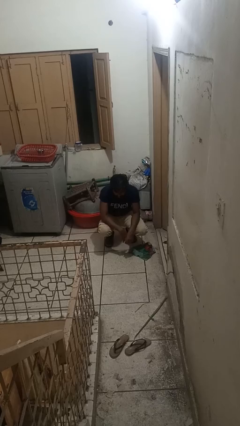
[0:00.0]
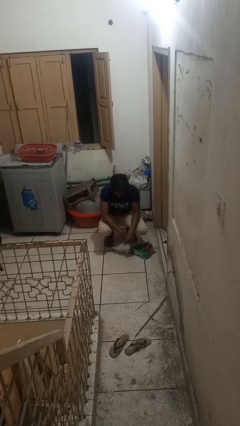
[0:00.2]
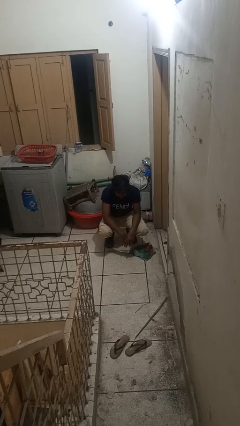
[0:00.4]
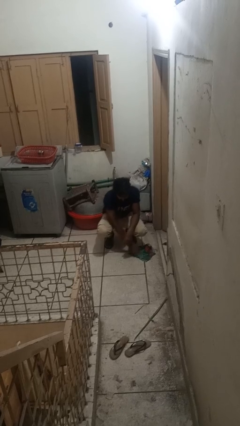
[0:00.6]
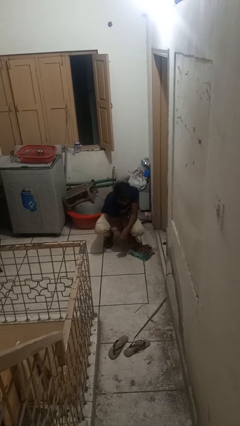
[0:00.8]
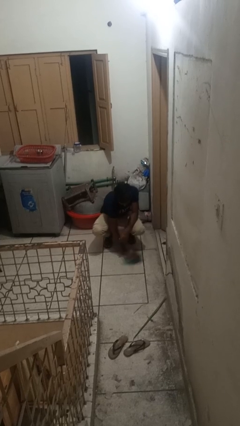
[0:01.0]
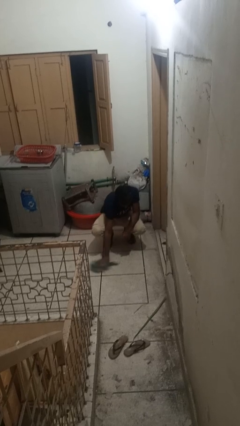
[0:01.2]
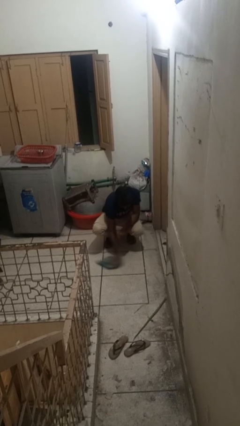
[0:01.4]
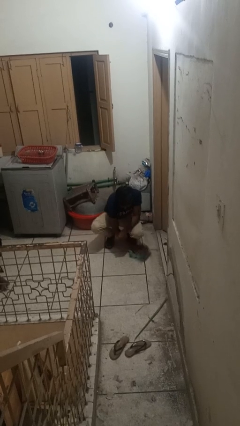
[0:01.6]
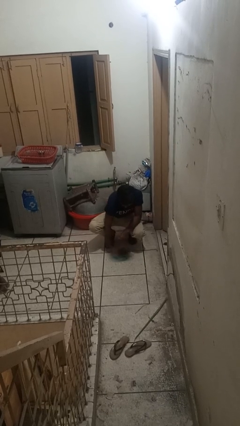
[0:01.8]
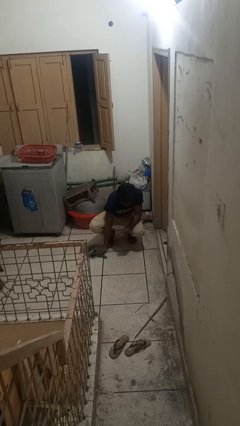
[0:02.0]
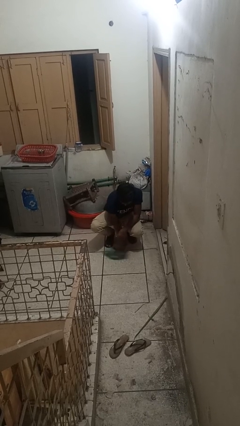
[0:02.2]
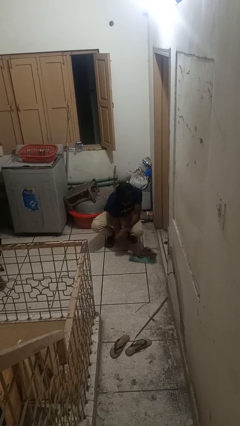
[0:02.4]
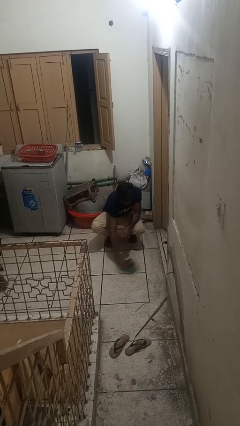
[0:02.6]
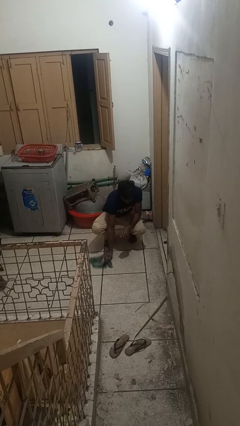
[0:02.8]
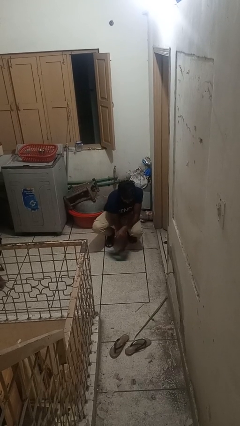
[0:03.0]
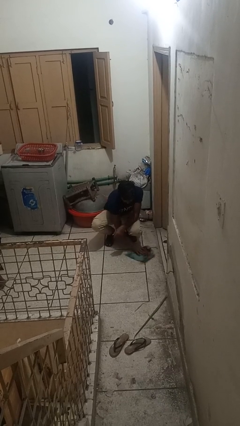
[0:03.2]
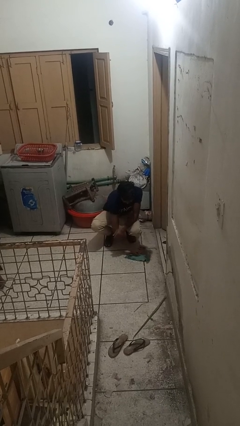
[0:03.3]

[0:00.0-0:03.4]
person mops

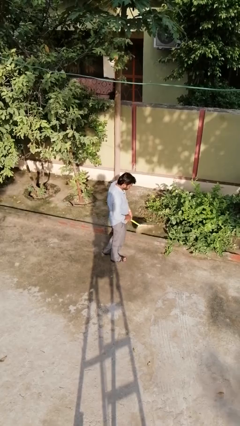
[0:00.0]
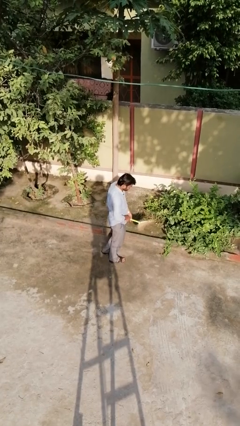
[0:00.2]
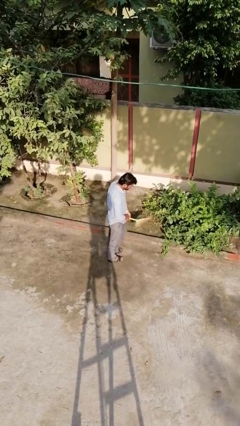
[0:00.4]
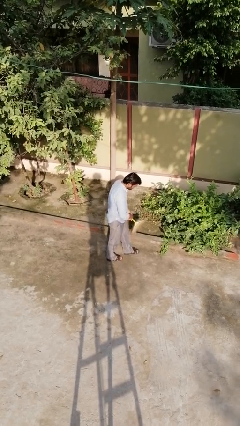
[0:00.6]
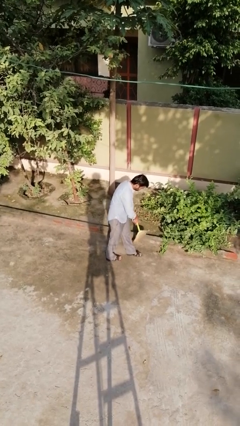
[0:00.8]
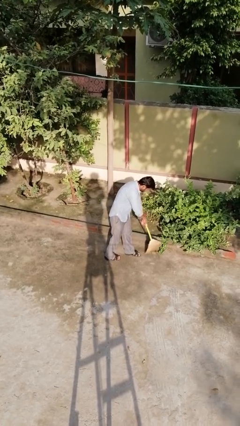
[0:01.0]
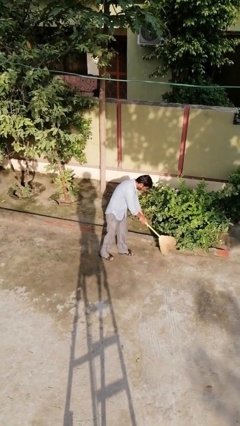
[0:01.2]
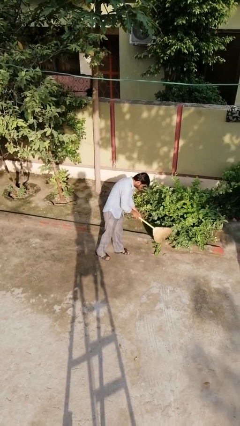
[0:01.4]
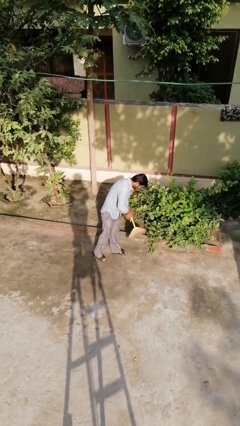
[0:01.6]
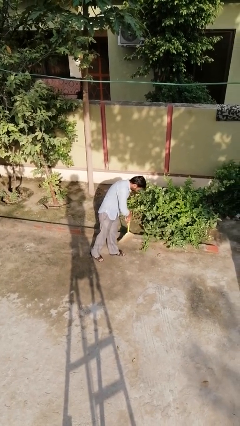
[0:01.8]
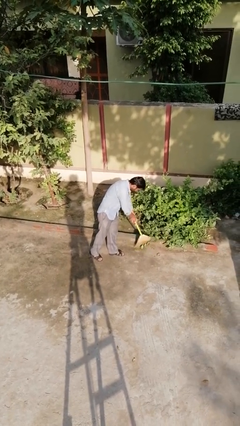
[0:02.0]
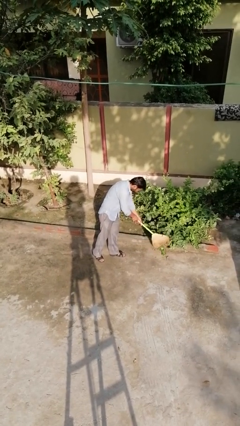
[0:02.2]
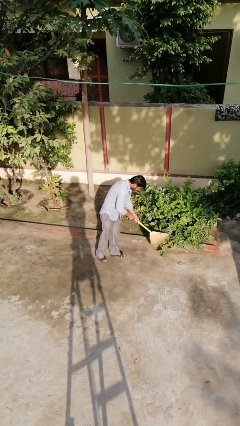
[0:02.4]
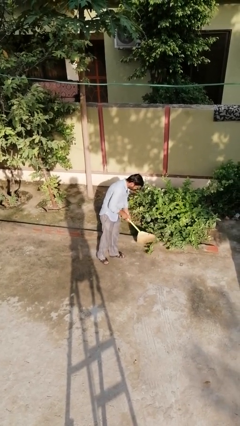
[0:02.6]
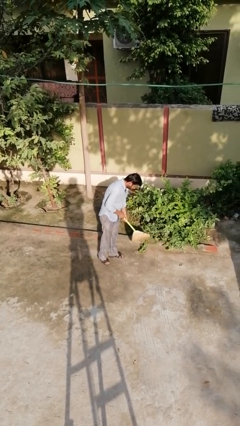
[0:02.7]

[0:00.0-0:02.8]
person sweeps floor

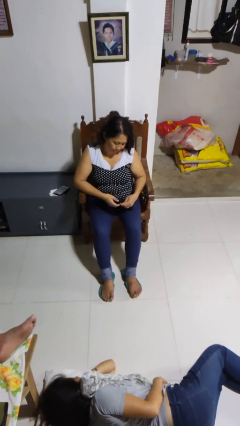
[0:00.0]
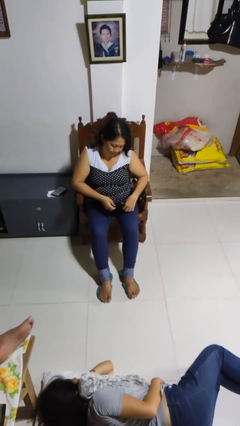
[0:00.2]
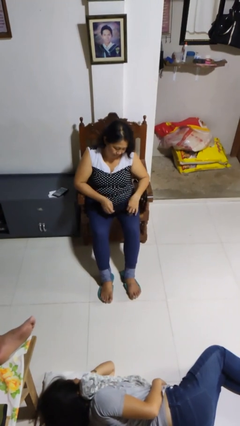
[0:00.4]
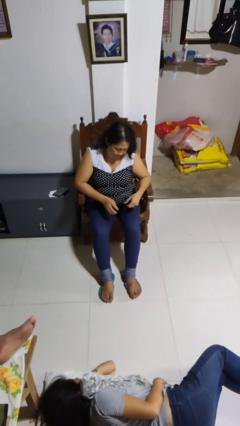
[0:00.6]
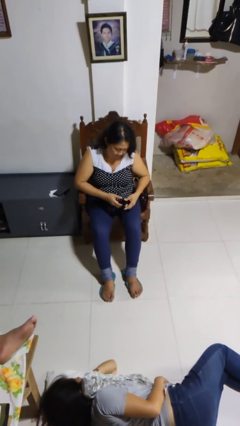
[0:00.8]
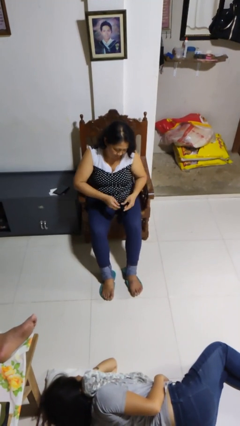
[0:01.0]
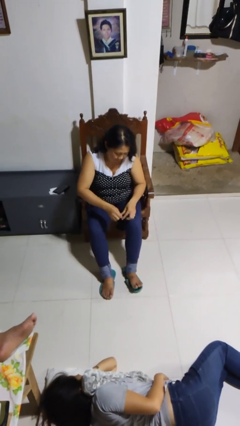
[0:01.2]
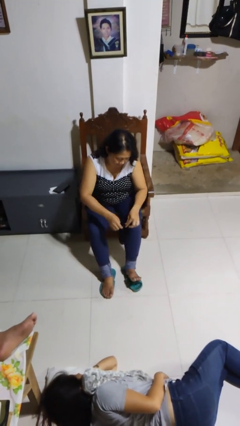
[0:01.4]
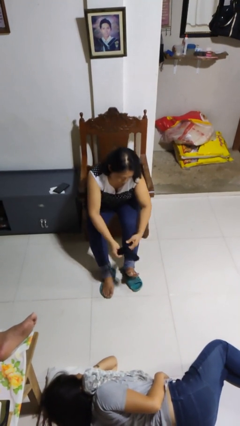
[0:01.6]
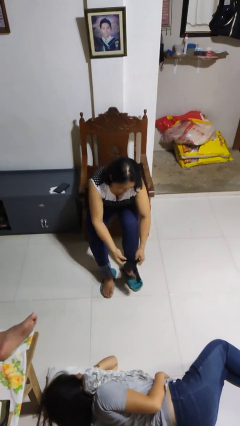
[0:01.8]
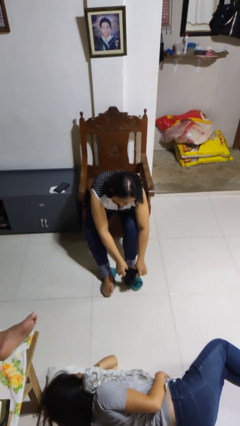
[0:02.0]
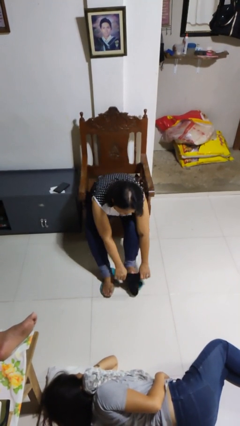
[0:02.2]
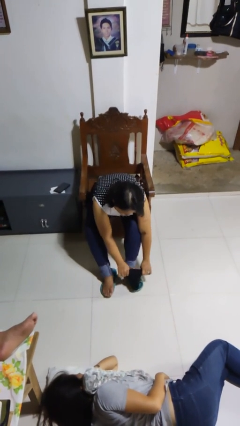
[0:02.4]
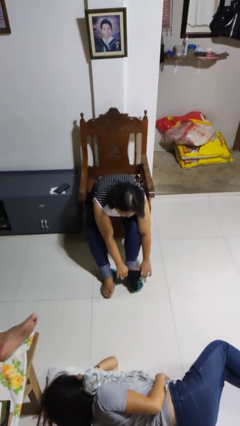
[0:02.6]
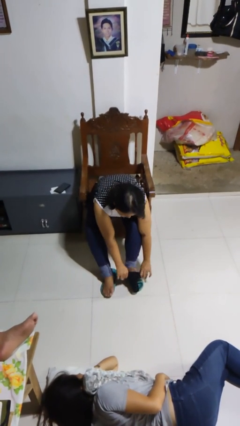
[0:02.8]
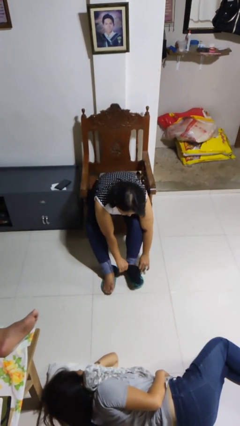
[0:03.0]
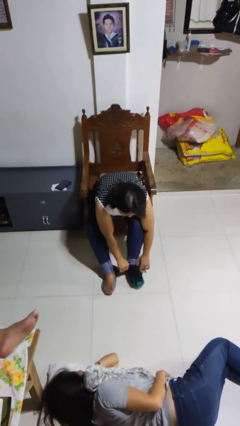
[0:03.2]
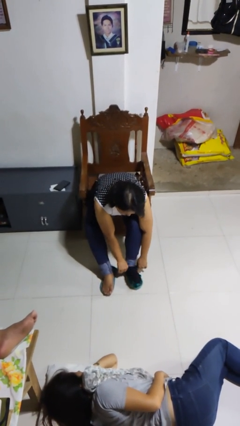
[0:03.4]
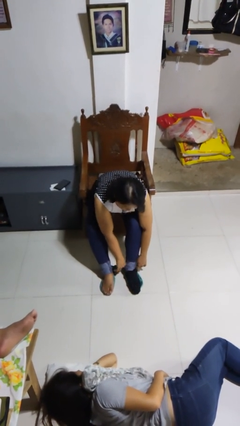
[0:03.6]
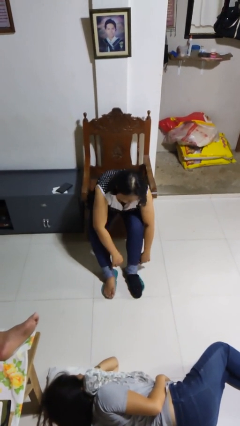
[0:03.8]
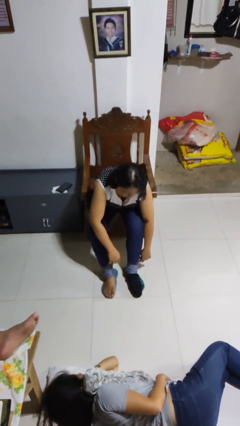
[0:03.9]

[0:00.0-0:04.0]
person puts on socks

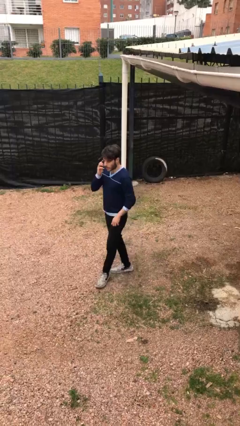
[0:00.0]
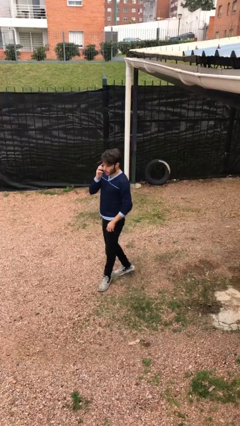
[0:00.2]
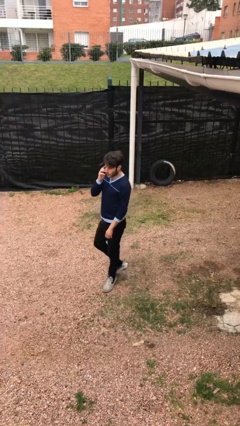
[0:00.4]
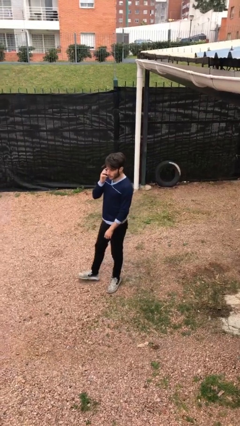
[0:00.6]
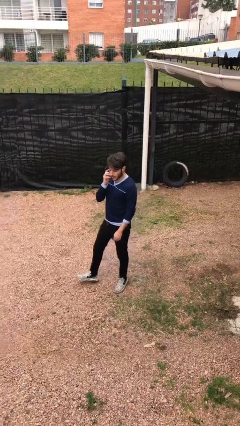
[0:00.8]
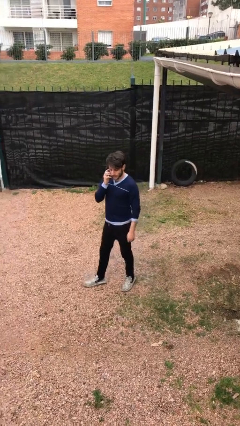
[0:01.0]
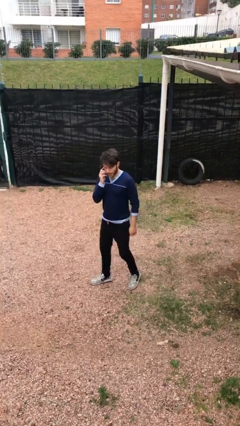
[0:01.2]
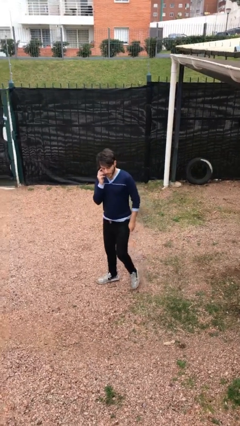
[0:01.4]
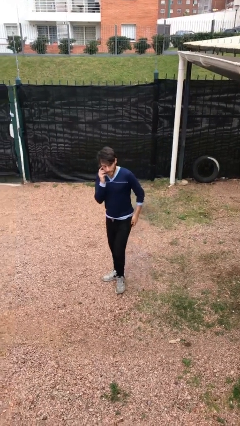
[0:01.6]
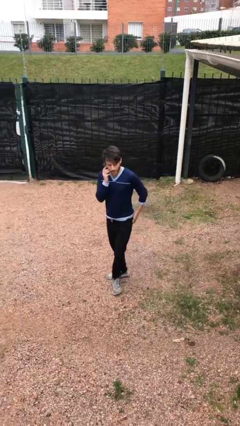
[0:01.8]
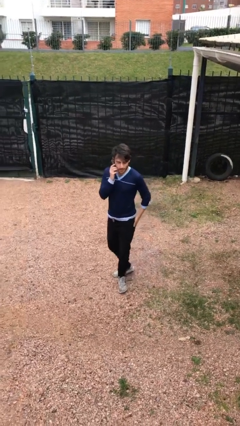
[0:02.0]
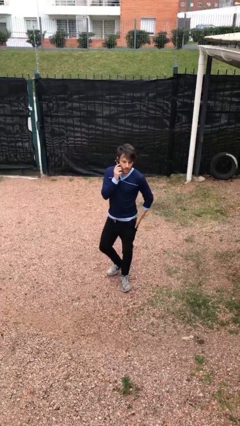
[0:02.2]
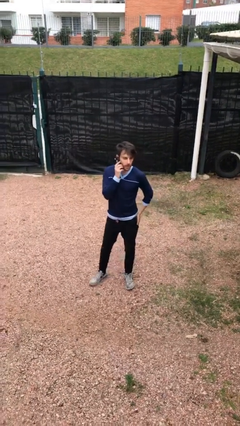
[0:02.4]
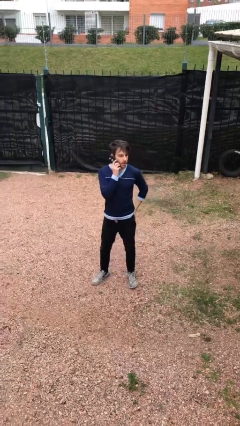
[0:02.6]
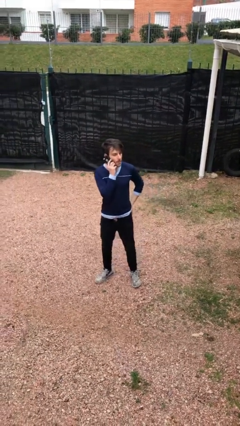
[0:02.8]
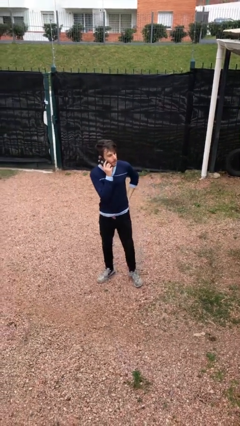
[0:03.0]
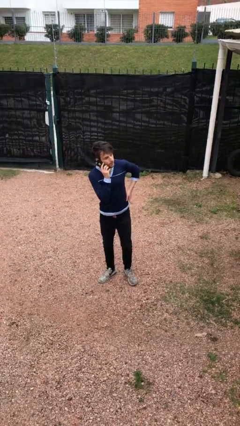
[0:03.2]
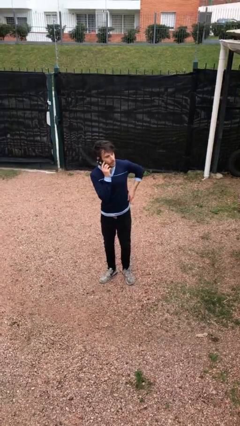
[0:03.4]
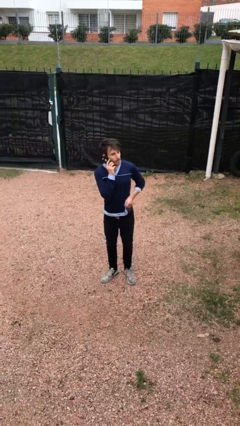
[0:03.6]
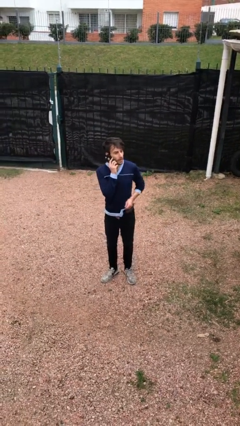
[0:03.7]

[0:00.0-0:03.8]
person talks on phone

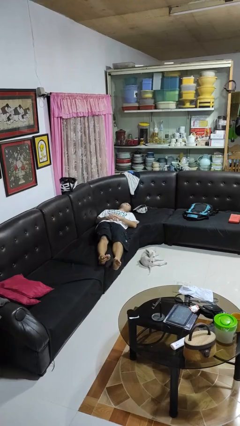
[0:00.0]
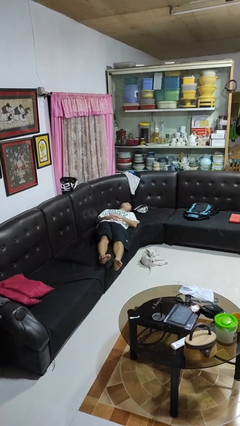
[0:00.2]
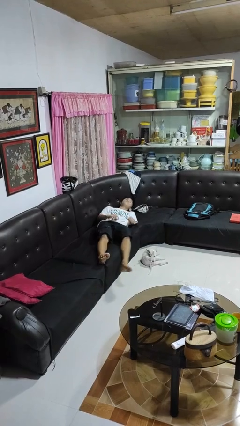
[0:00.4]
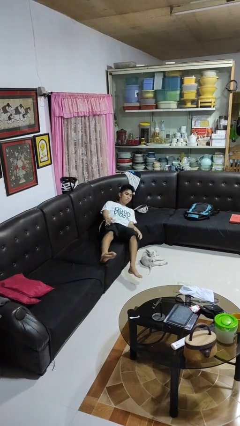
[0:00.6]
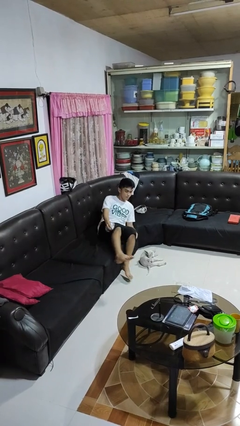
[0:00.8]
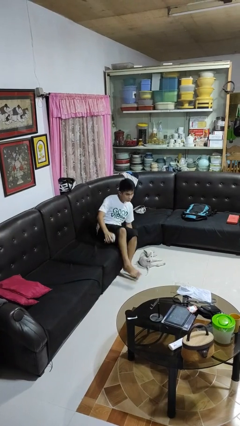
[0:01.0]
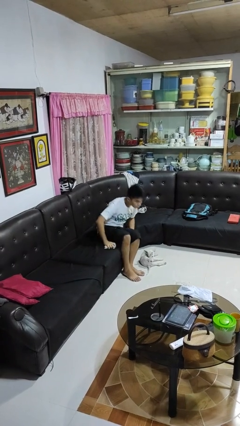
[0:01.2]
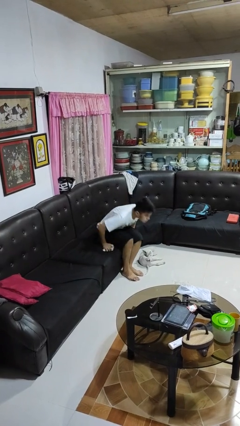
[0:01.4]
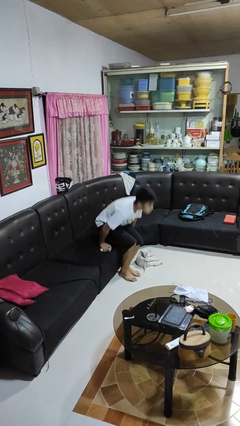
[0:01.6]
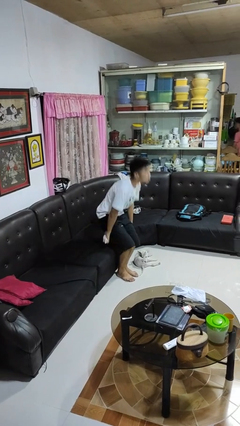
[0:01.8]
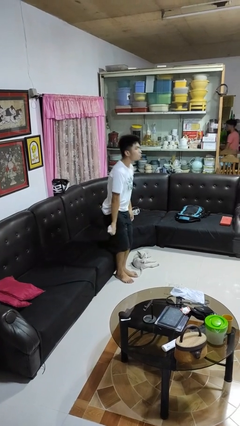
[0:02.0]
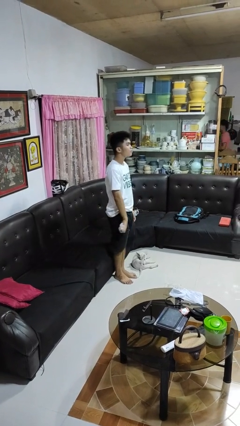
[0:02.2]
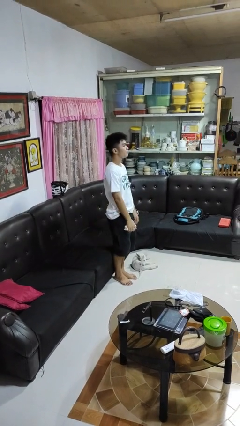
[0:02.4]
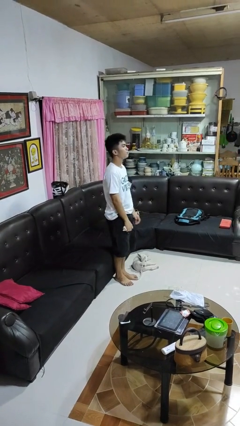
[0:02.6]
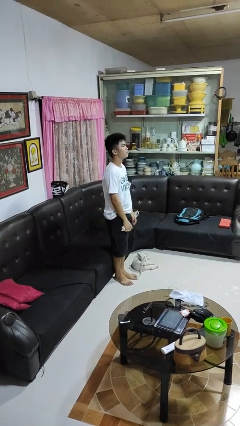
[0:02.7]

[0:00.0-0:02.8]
person stands up

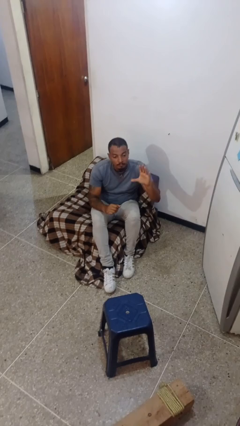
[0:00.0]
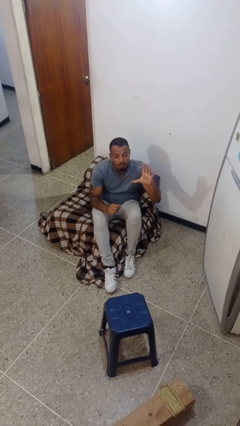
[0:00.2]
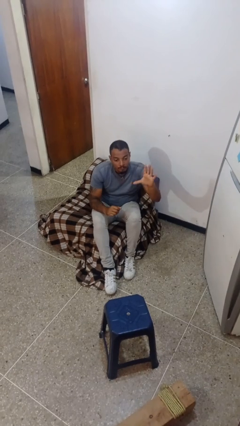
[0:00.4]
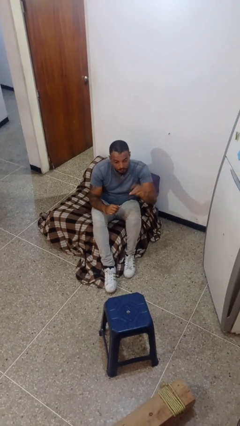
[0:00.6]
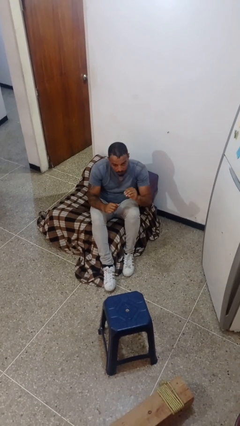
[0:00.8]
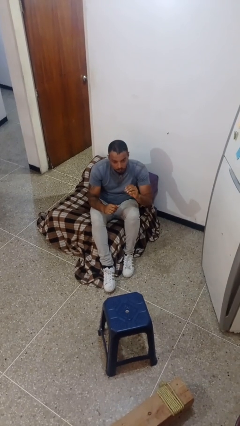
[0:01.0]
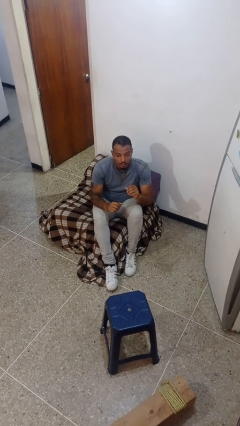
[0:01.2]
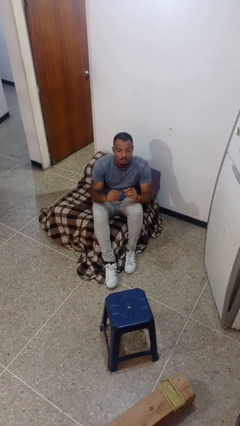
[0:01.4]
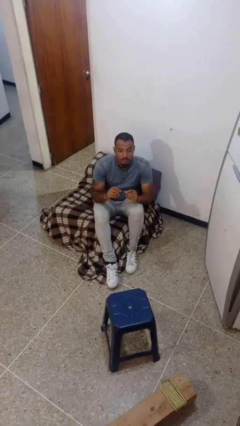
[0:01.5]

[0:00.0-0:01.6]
person gestures zoom out
